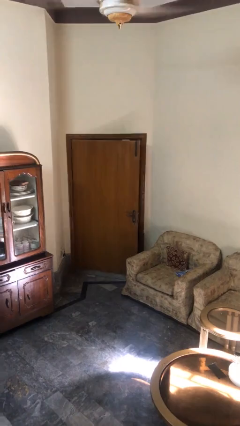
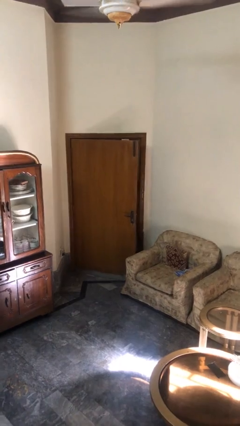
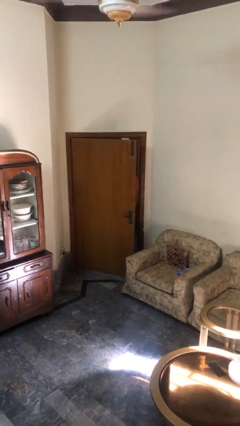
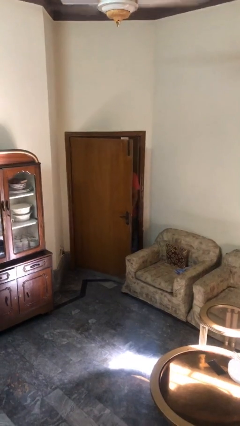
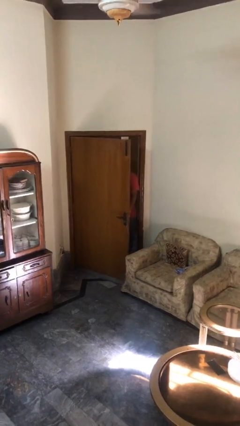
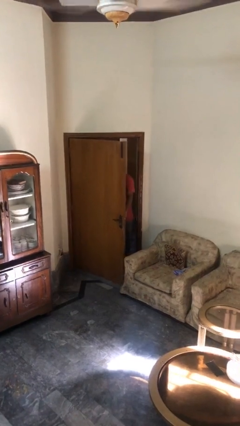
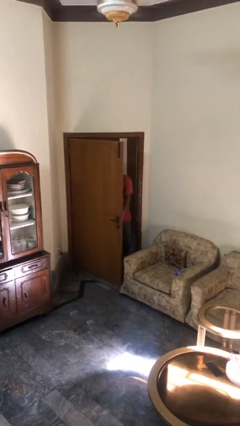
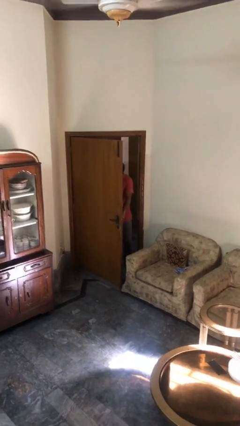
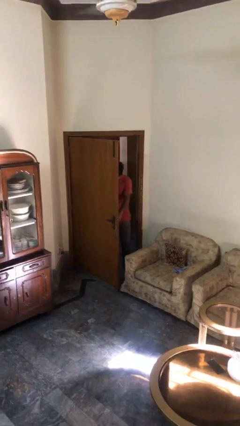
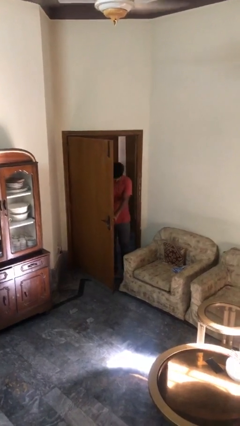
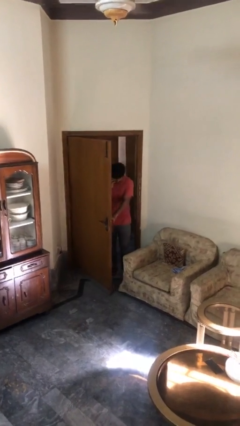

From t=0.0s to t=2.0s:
person opens facility door

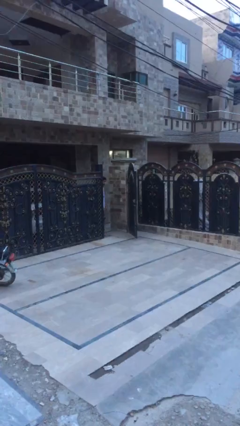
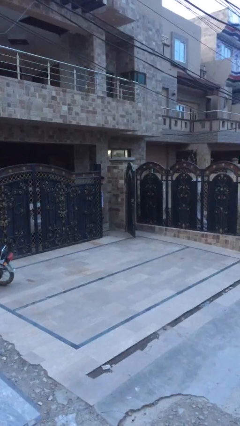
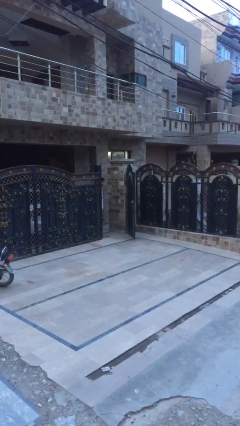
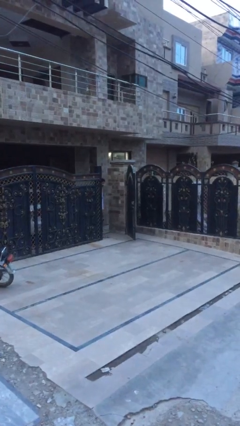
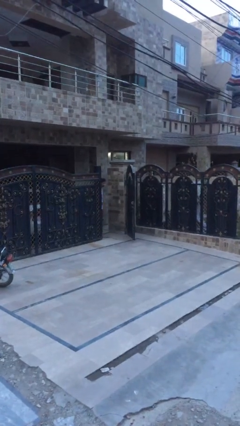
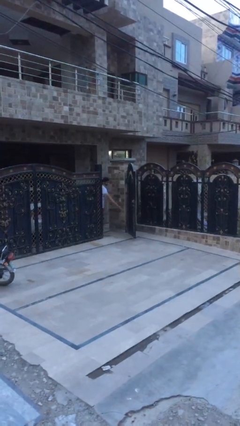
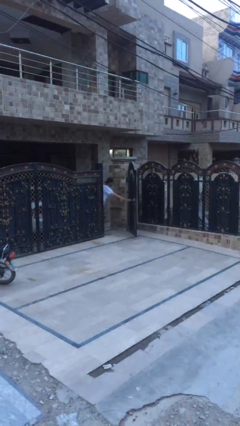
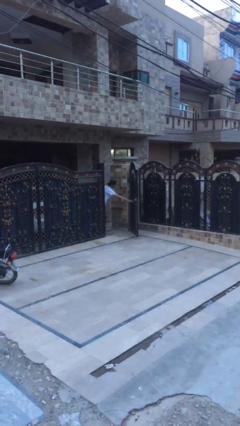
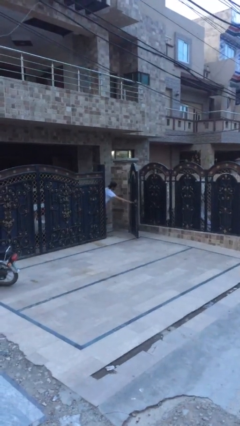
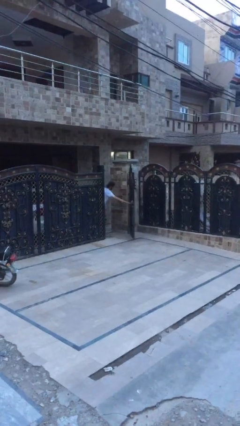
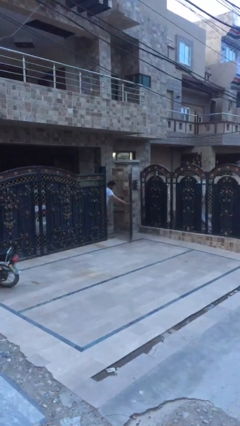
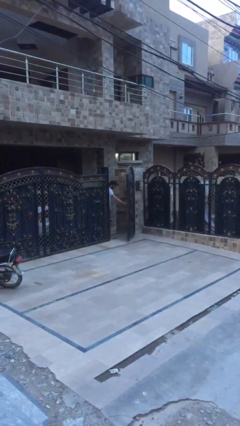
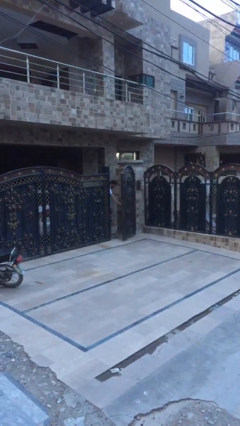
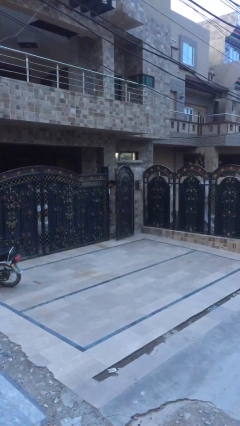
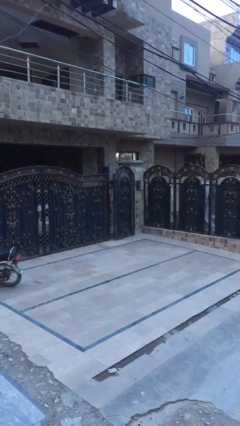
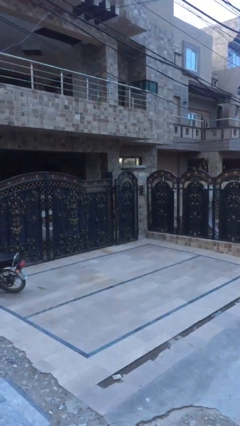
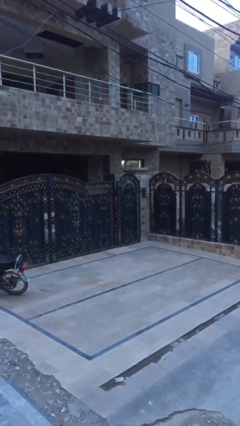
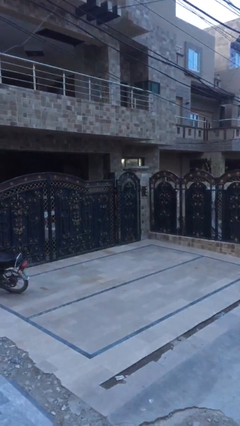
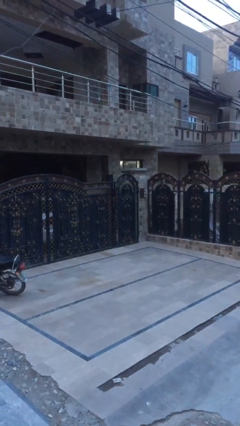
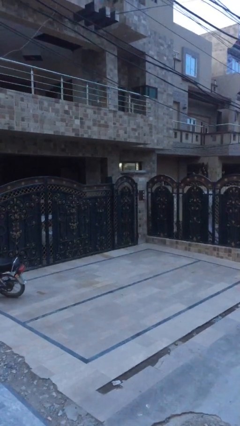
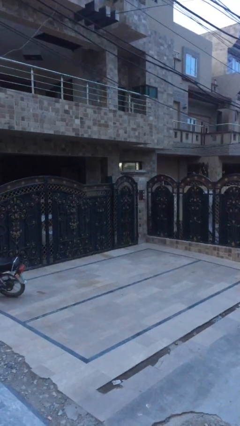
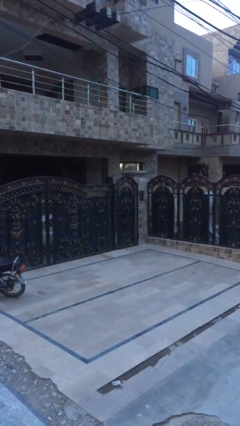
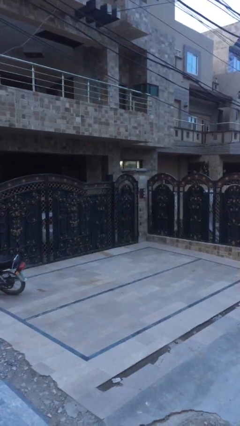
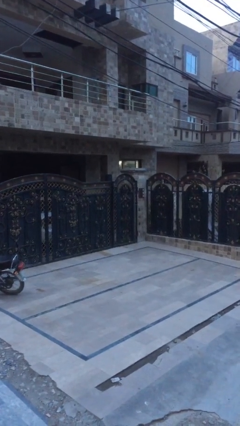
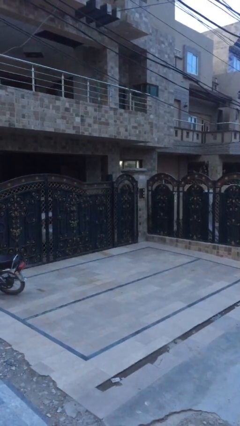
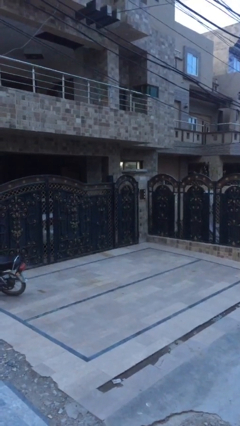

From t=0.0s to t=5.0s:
person closes facility door

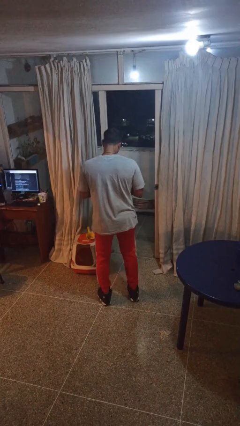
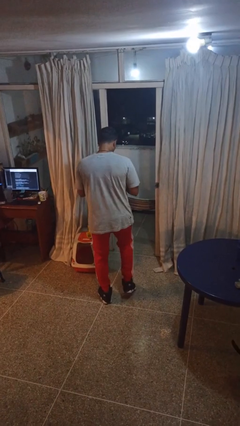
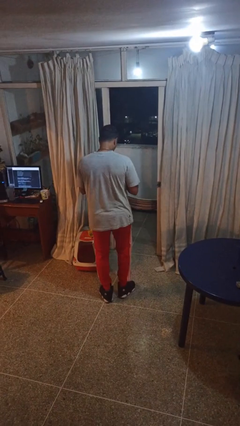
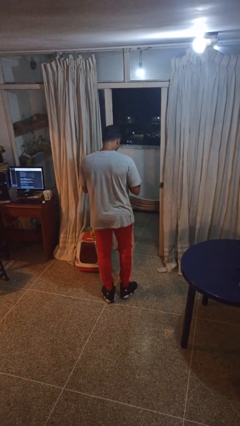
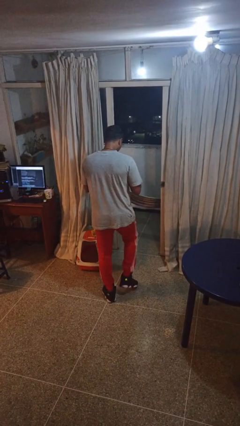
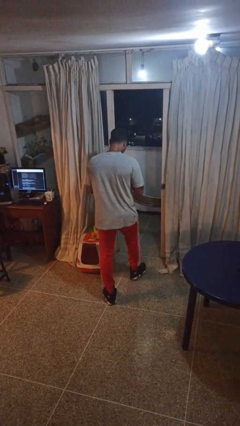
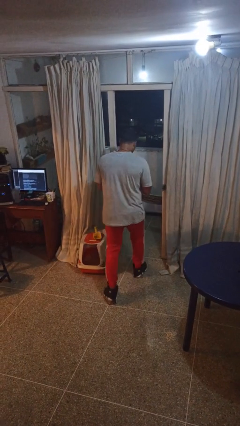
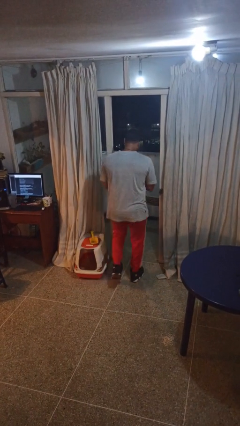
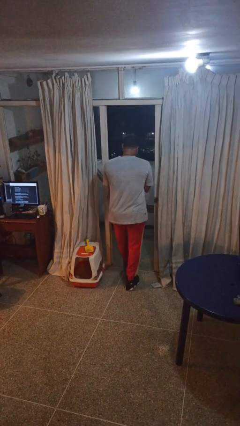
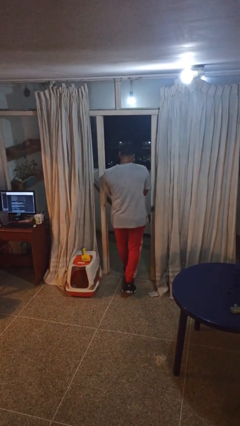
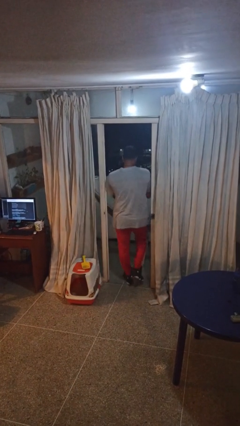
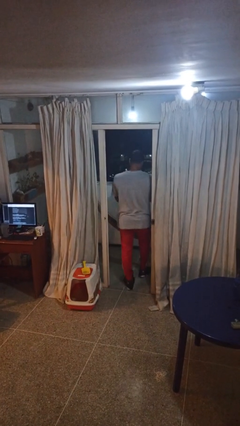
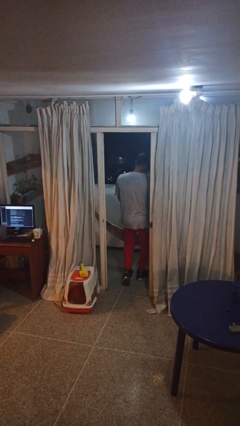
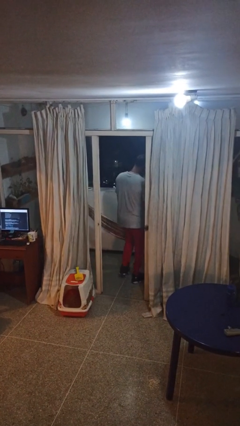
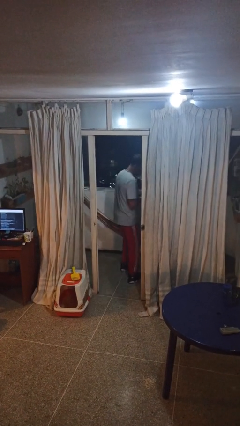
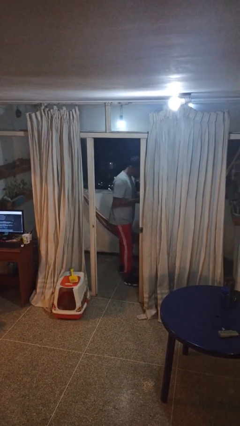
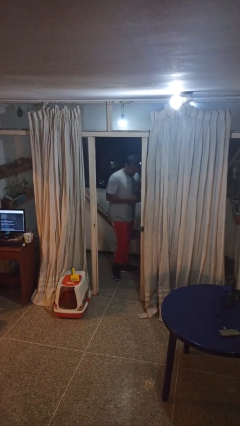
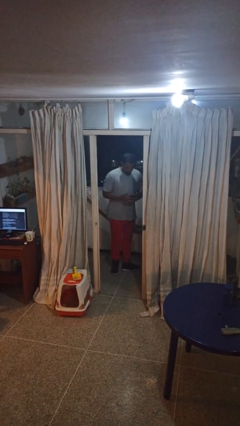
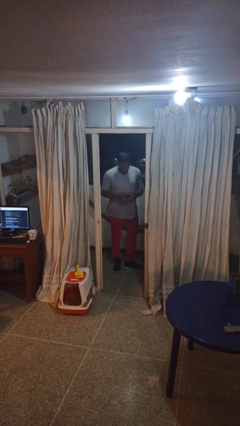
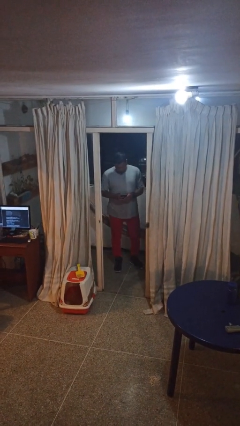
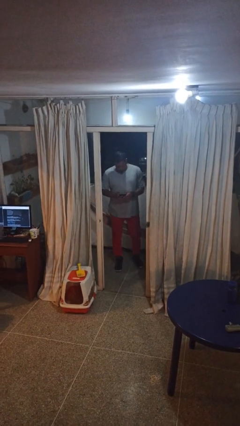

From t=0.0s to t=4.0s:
person exits scene through structure

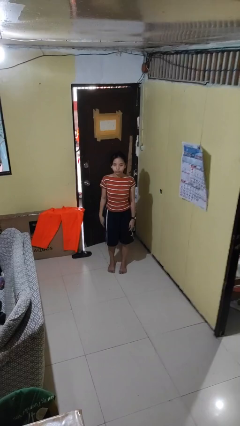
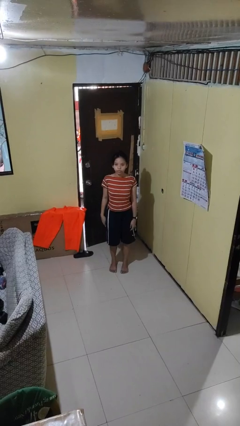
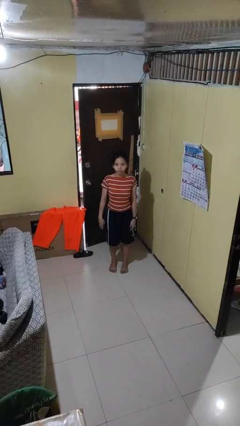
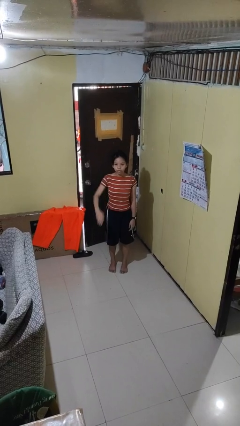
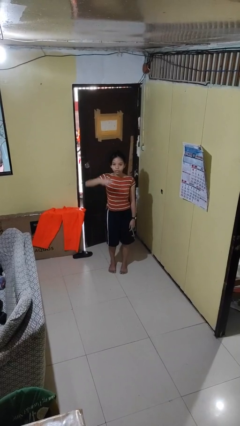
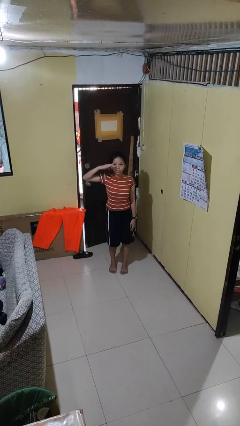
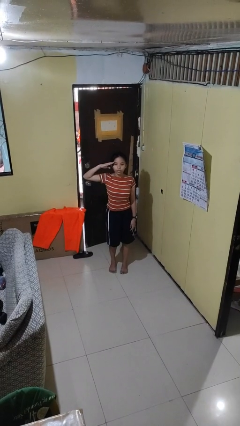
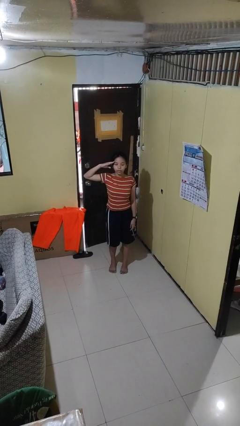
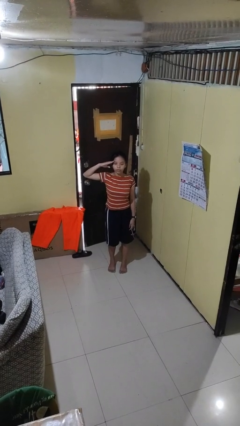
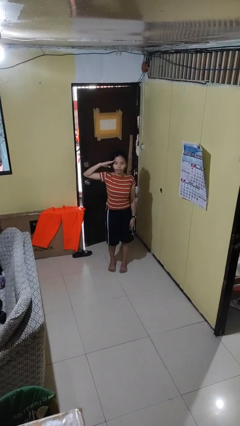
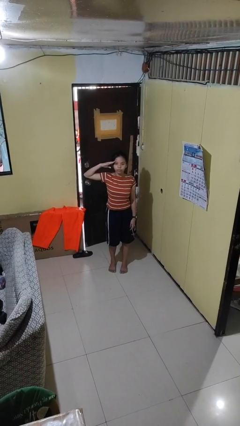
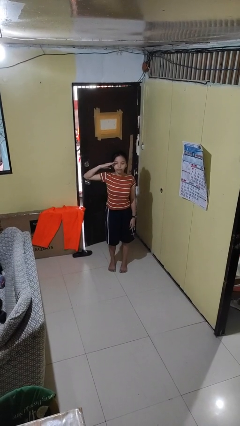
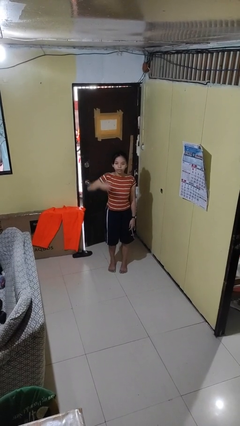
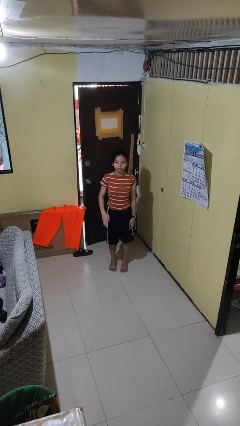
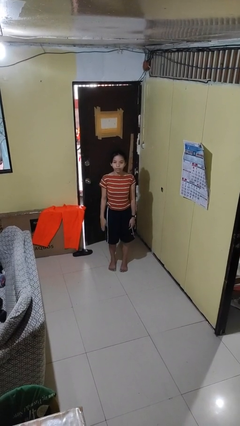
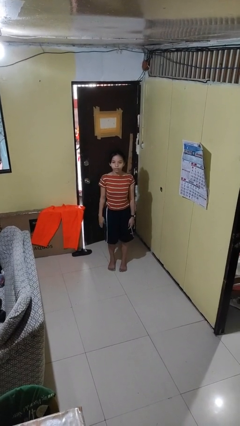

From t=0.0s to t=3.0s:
person salutes

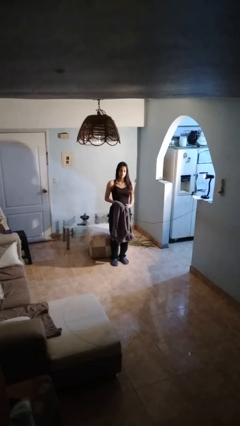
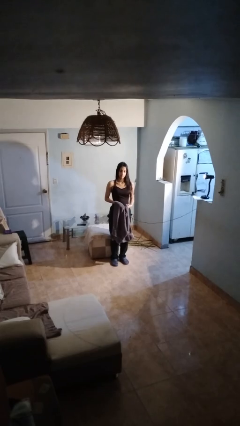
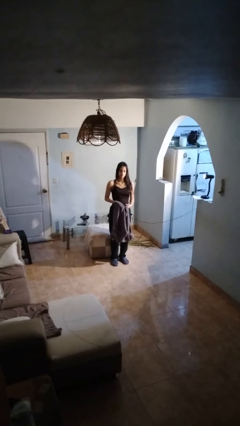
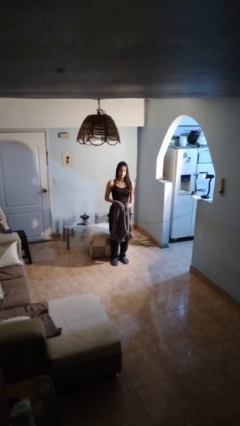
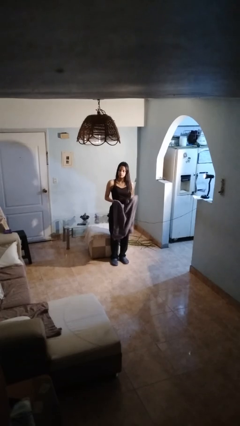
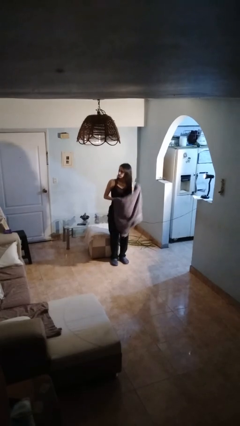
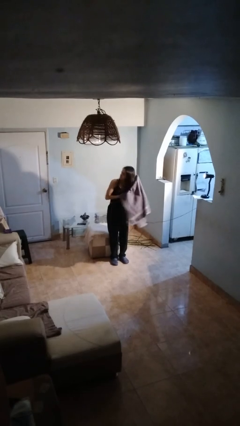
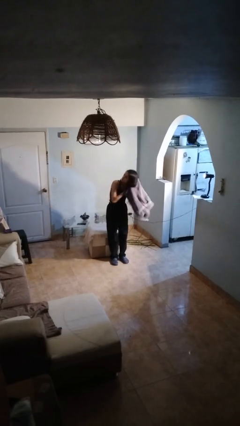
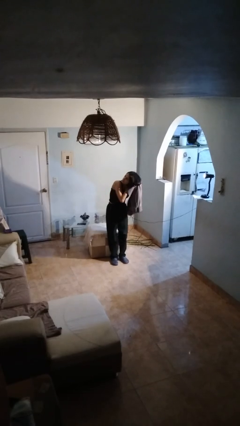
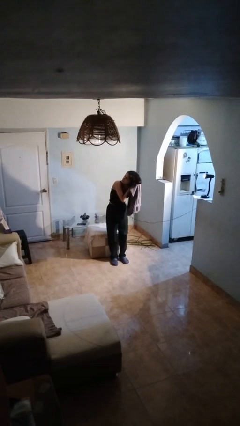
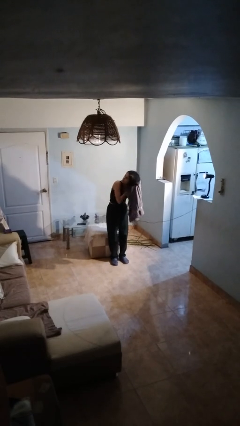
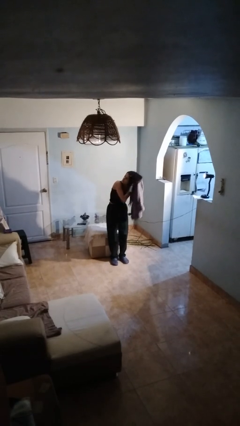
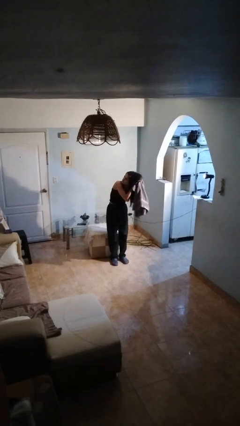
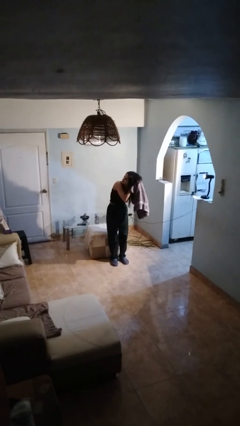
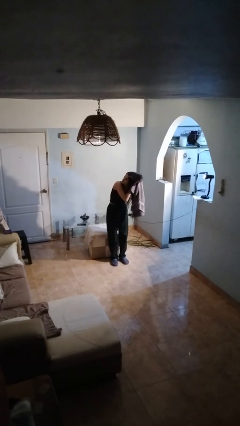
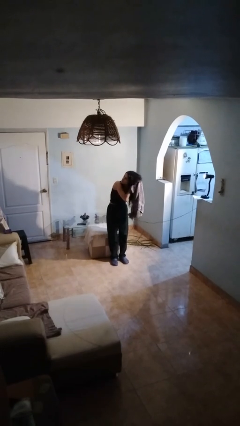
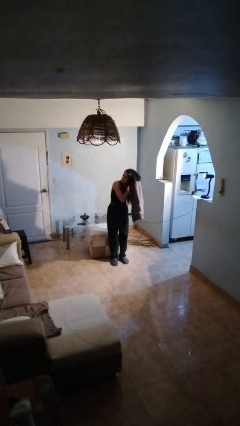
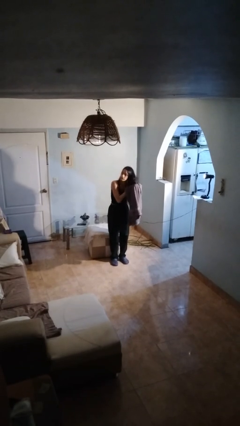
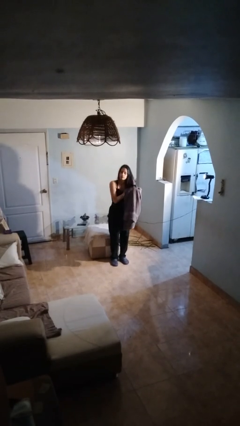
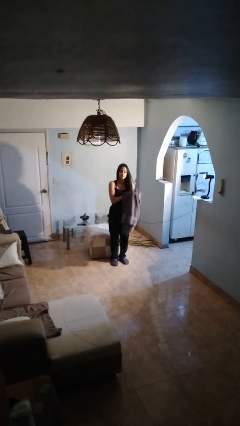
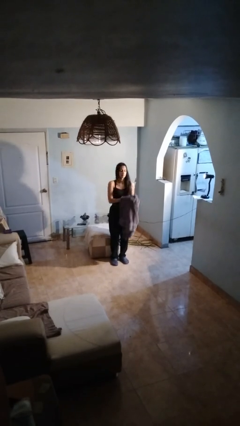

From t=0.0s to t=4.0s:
person dries hair with towel
